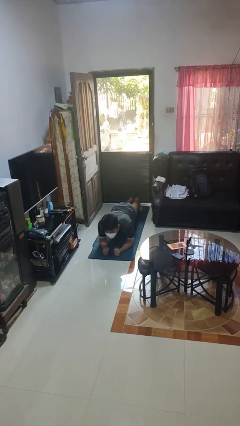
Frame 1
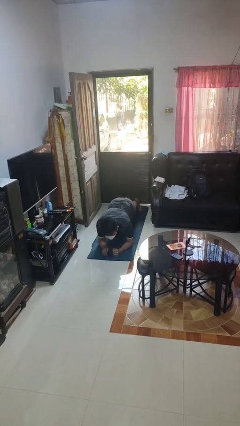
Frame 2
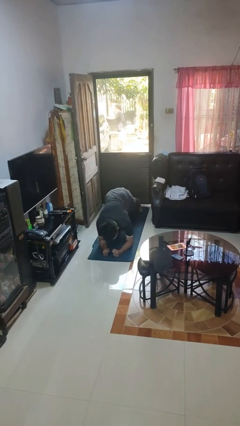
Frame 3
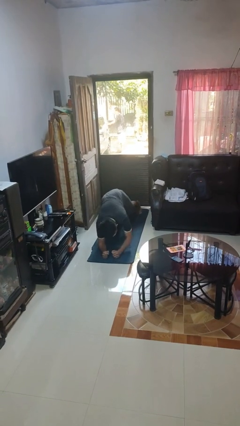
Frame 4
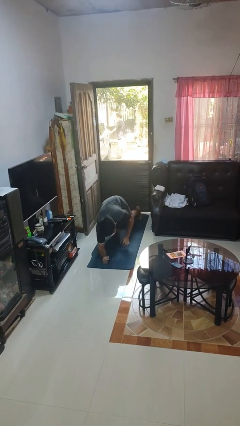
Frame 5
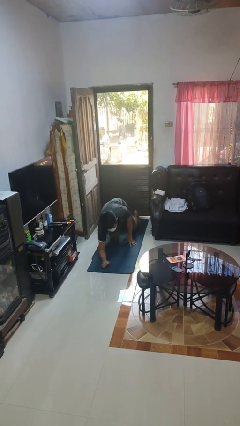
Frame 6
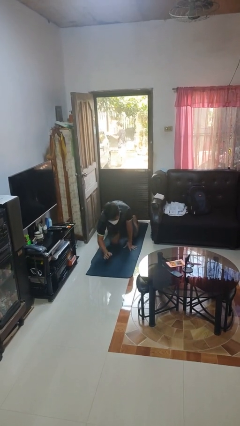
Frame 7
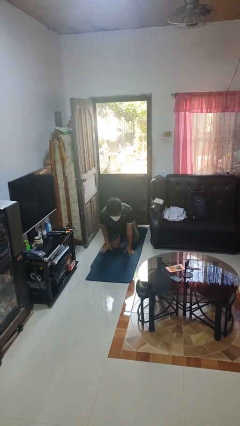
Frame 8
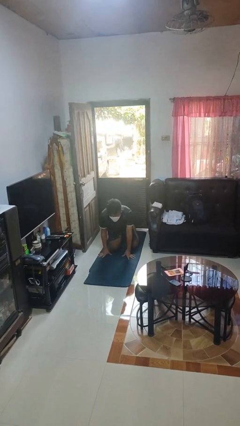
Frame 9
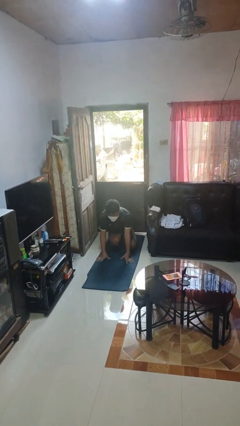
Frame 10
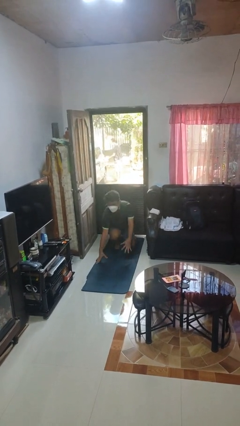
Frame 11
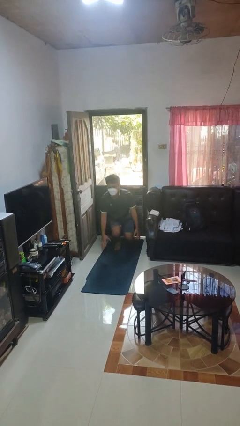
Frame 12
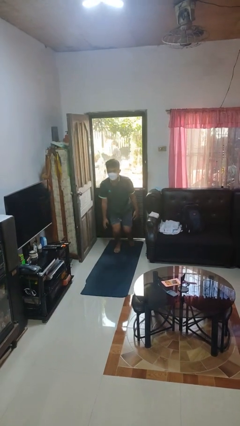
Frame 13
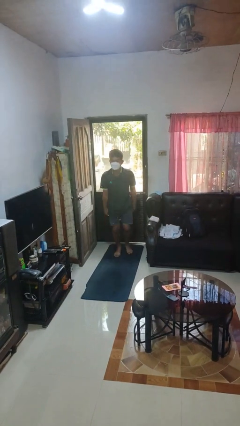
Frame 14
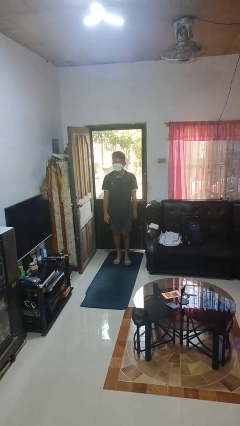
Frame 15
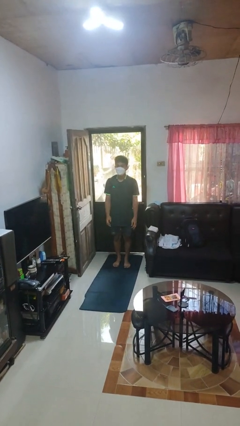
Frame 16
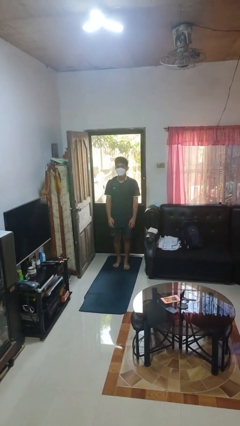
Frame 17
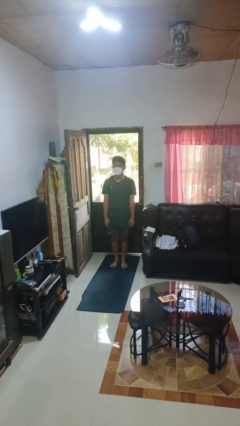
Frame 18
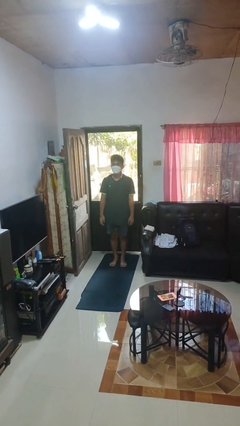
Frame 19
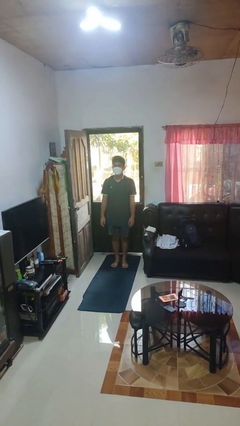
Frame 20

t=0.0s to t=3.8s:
person stands up from floor

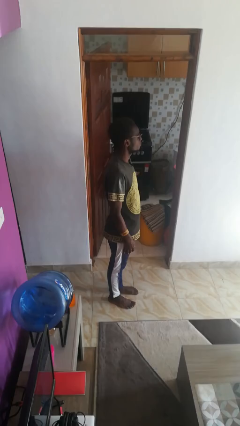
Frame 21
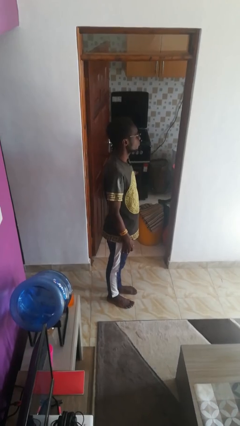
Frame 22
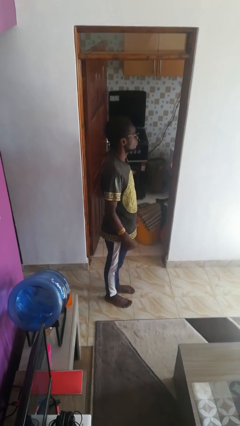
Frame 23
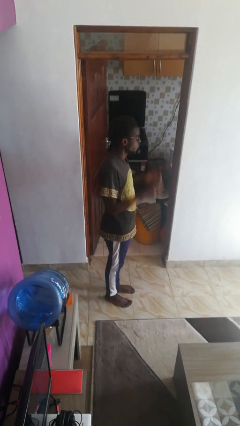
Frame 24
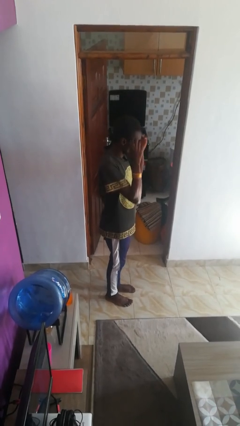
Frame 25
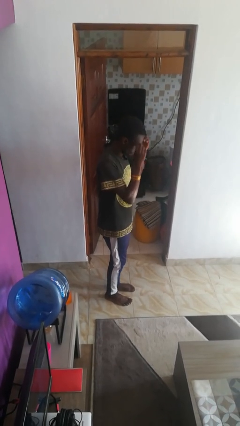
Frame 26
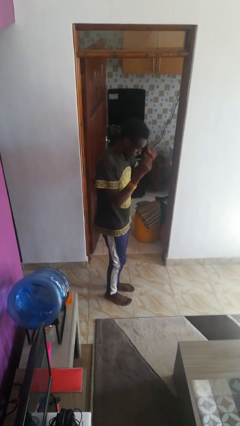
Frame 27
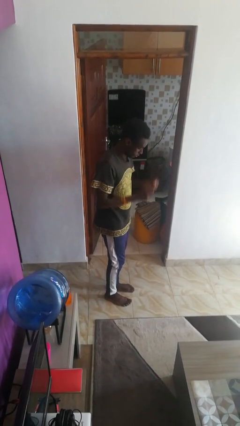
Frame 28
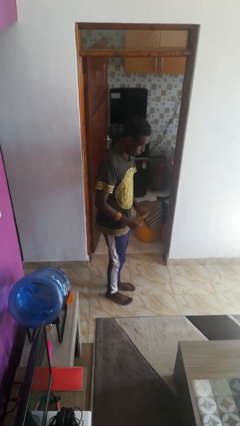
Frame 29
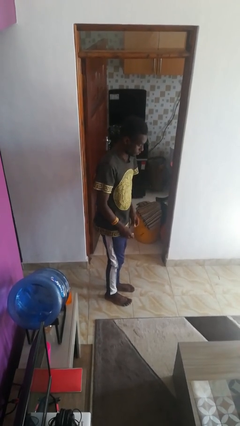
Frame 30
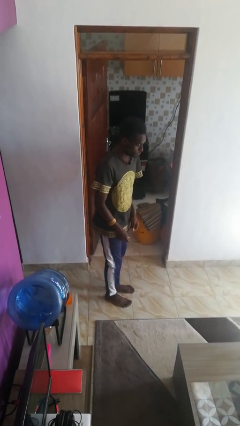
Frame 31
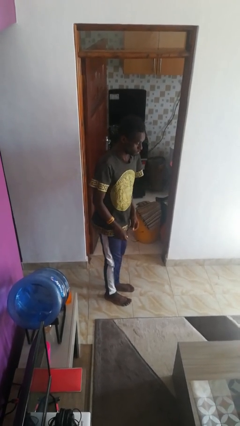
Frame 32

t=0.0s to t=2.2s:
person takes off glasses

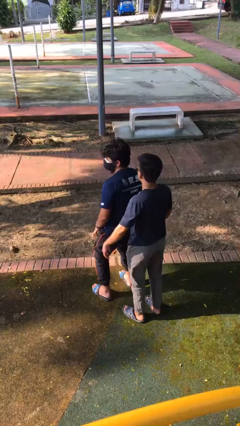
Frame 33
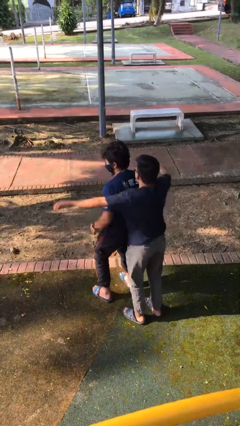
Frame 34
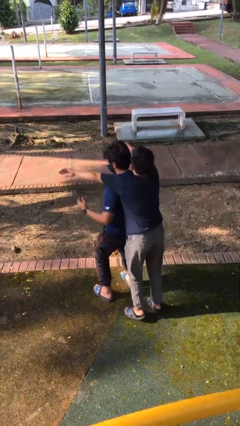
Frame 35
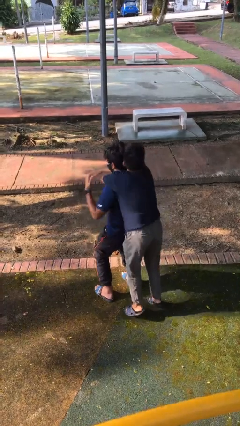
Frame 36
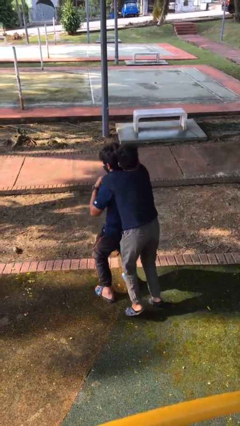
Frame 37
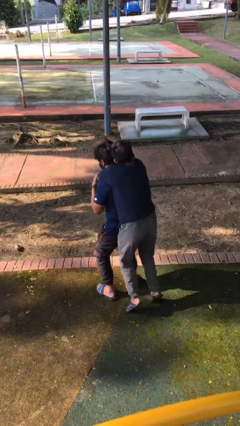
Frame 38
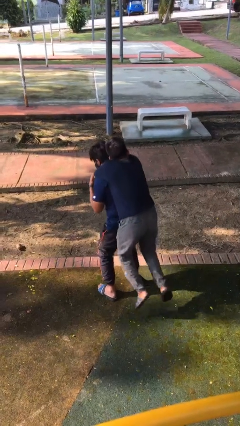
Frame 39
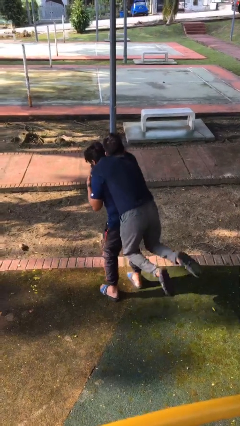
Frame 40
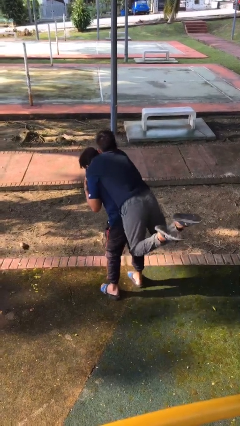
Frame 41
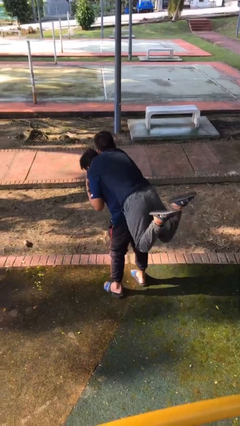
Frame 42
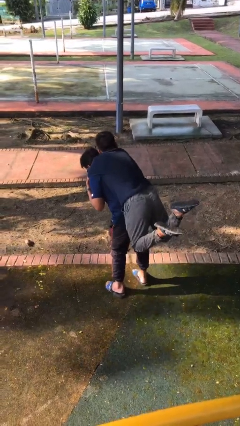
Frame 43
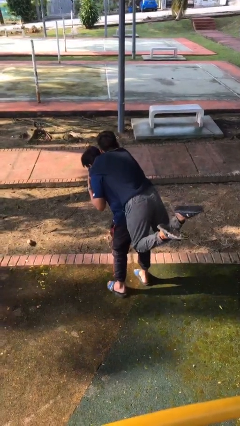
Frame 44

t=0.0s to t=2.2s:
person carries person over shoulder

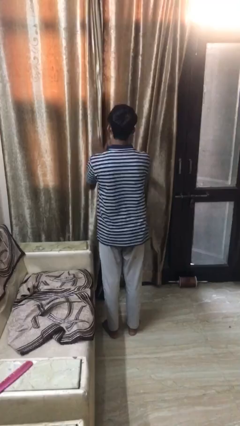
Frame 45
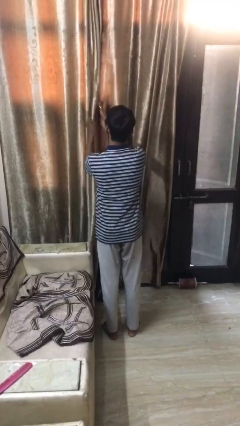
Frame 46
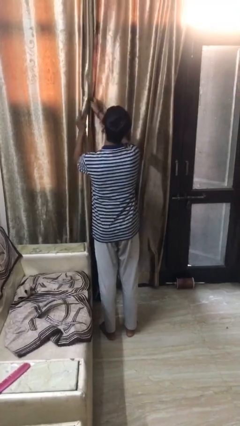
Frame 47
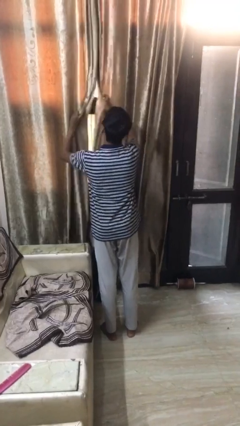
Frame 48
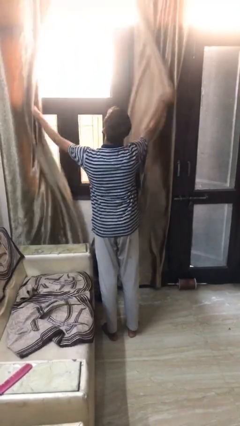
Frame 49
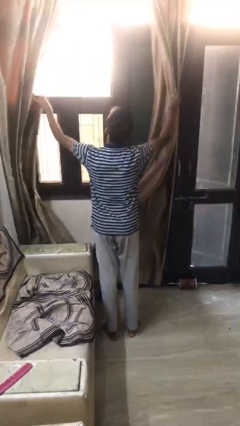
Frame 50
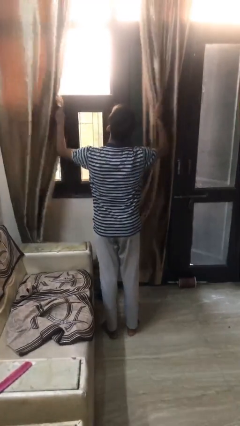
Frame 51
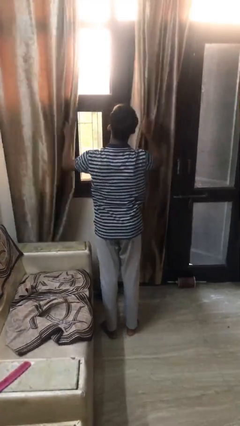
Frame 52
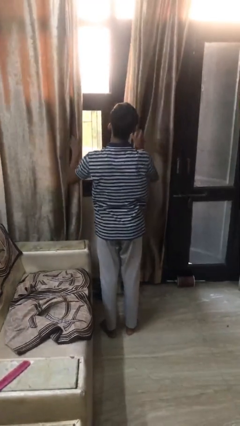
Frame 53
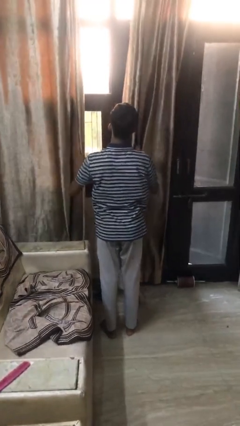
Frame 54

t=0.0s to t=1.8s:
person opens curtains

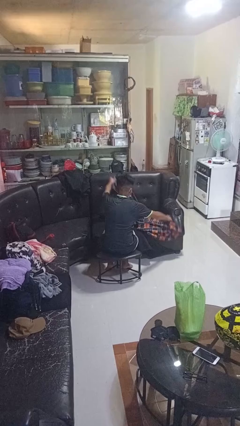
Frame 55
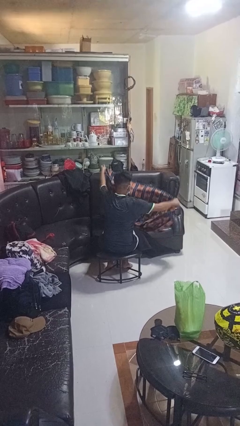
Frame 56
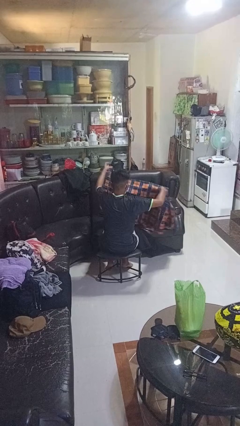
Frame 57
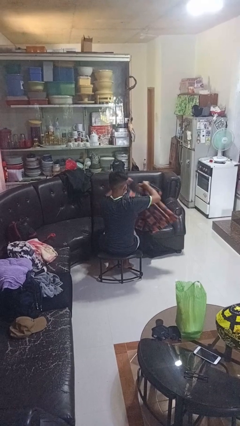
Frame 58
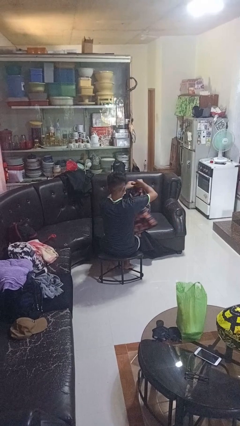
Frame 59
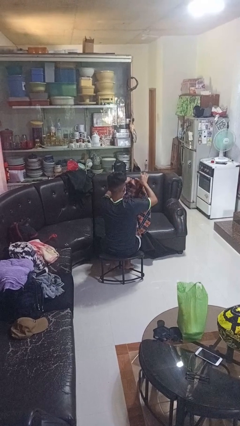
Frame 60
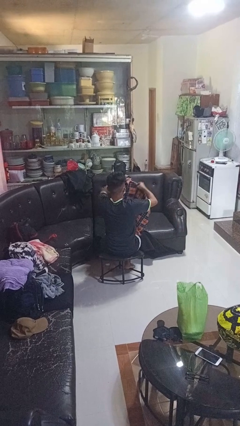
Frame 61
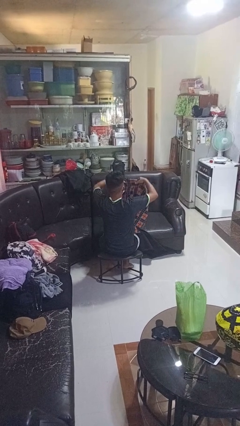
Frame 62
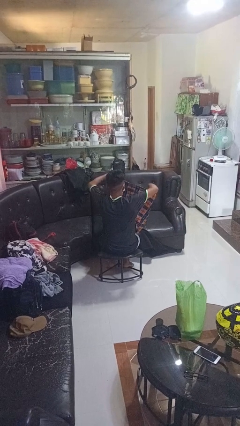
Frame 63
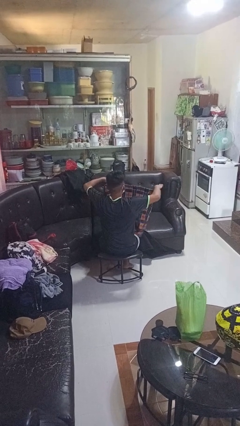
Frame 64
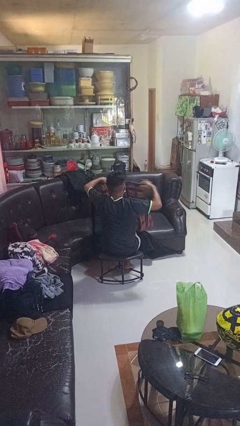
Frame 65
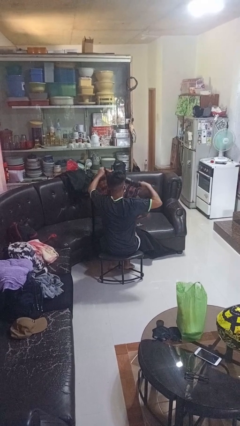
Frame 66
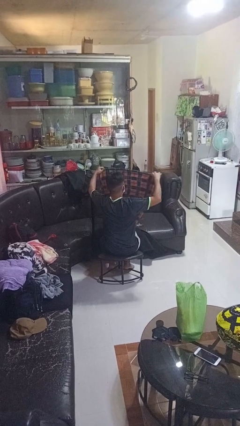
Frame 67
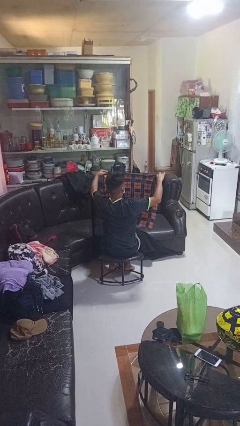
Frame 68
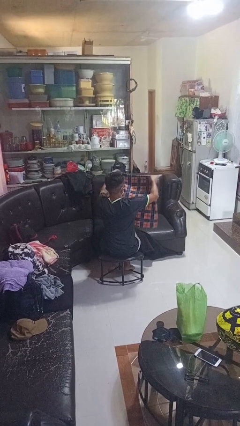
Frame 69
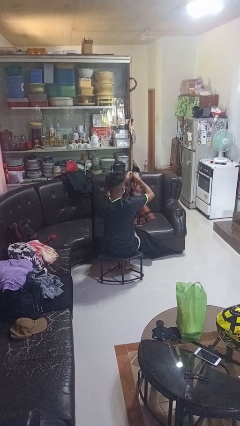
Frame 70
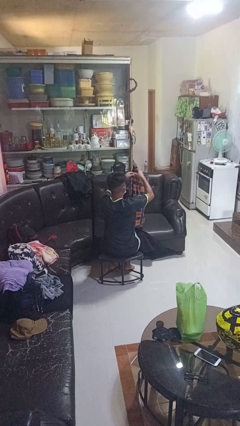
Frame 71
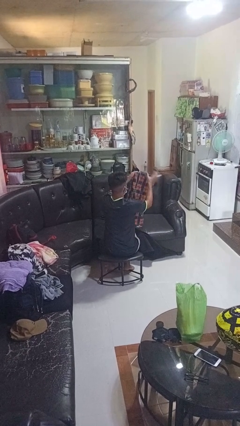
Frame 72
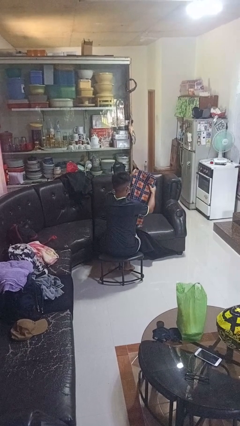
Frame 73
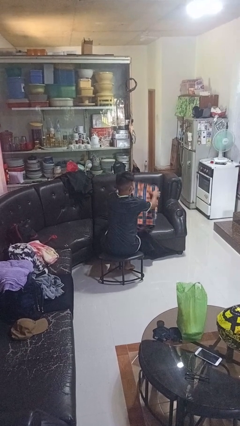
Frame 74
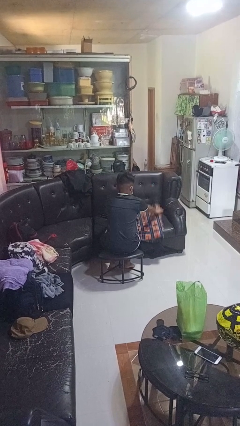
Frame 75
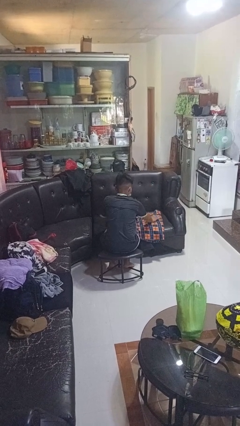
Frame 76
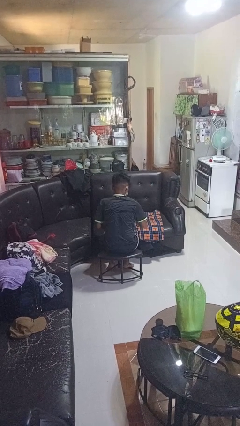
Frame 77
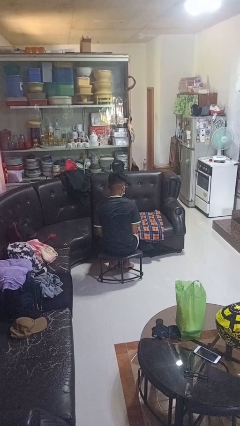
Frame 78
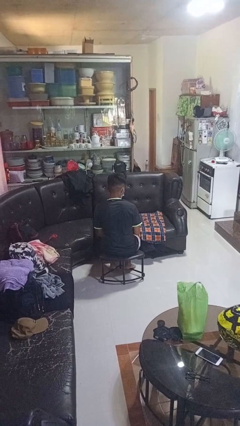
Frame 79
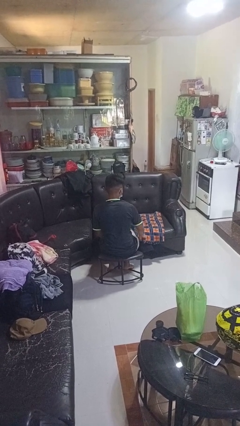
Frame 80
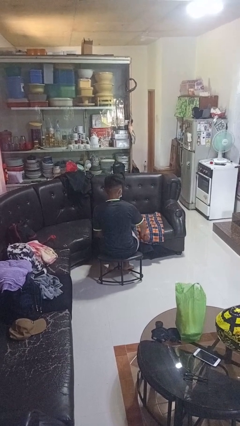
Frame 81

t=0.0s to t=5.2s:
person folds blanket

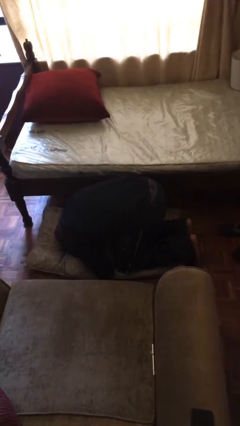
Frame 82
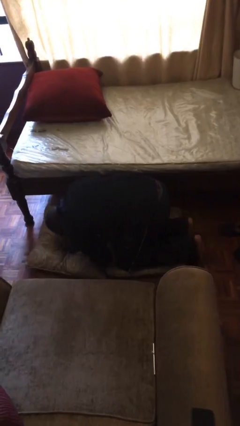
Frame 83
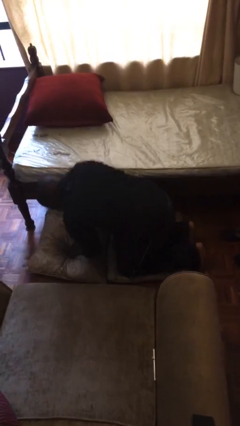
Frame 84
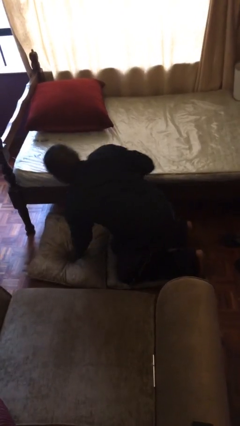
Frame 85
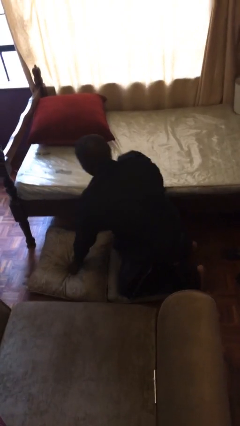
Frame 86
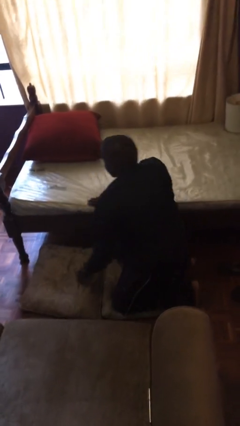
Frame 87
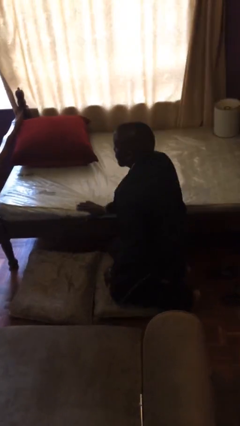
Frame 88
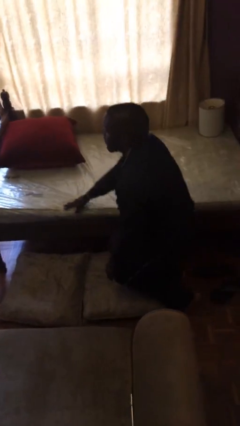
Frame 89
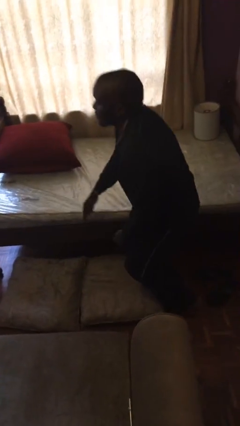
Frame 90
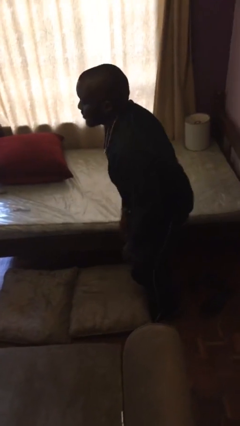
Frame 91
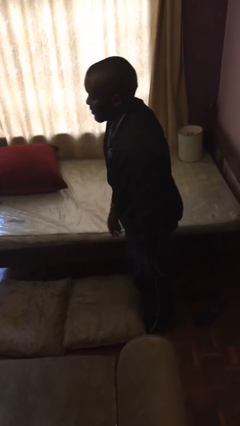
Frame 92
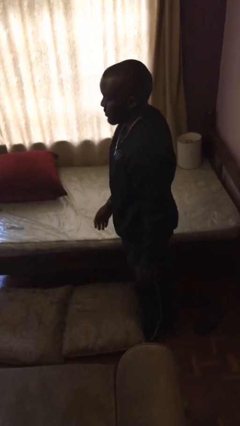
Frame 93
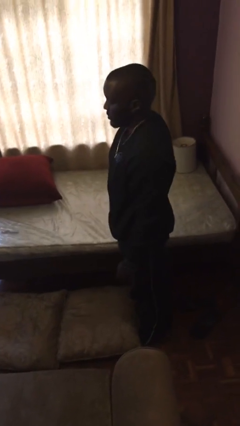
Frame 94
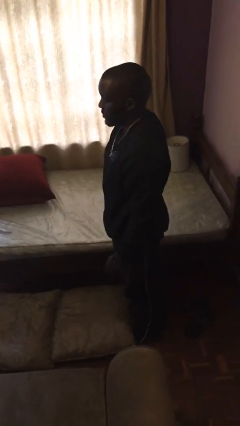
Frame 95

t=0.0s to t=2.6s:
person falls from bed
